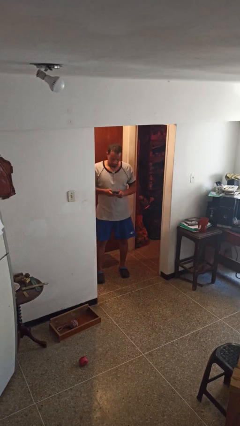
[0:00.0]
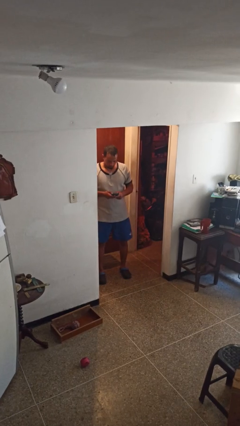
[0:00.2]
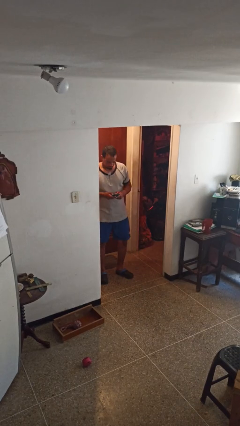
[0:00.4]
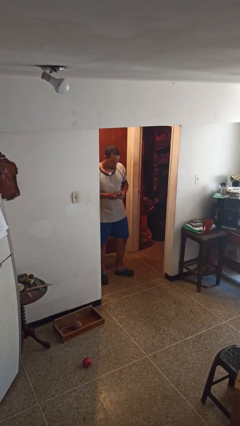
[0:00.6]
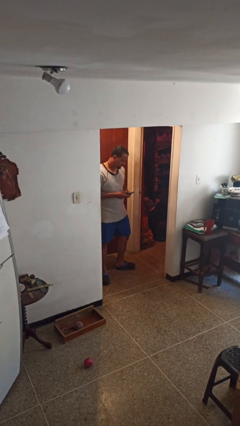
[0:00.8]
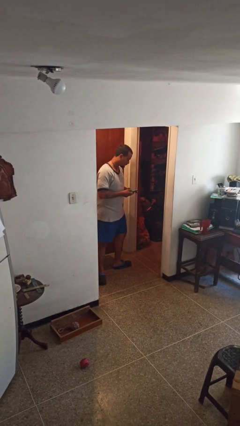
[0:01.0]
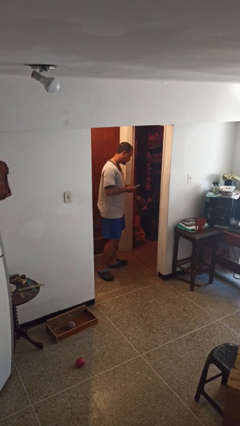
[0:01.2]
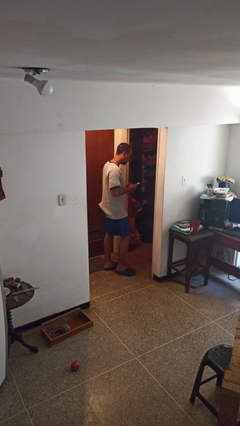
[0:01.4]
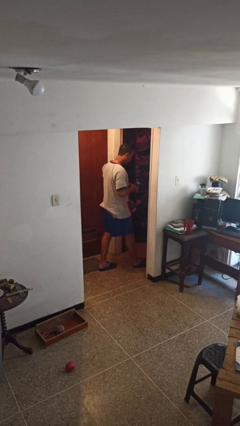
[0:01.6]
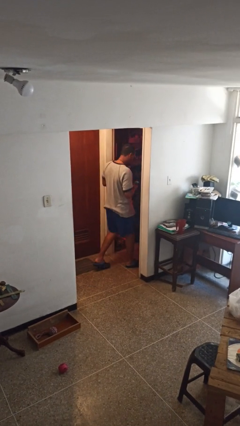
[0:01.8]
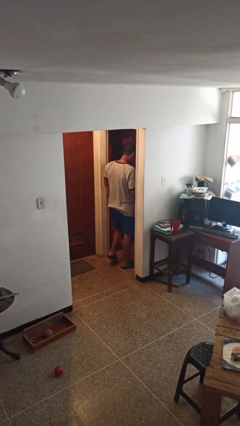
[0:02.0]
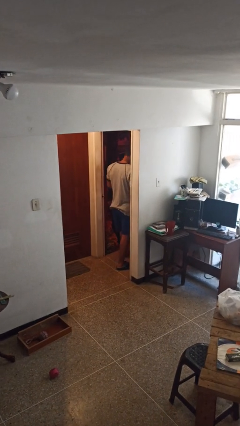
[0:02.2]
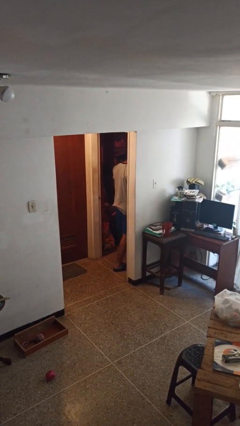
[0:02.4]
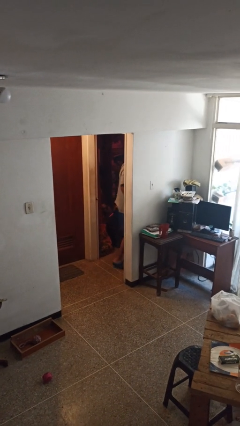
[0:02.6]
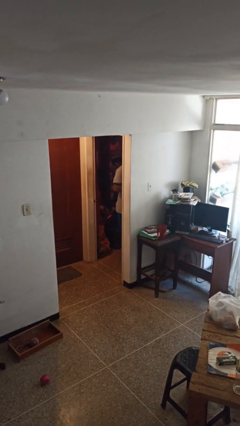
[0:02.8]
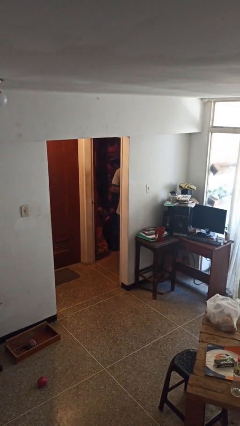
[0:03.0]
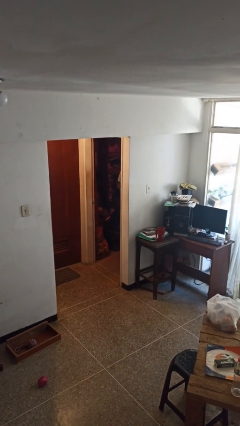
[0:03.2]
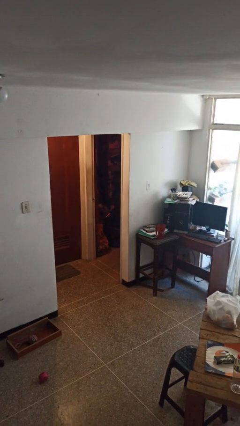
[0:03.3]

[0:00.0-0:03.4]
person exits scene through structure

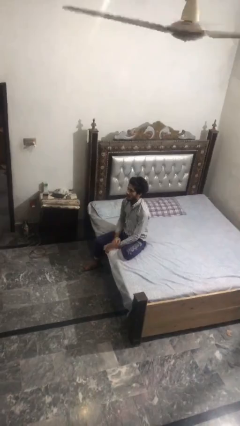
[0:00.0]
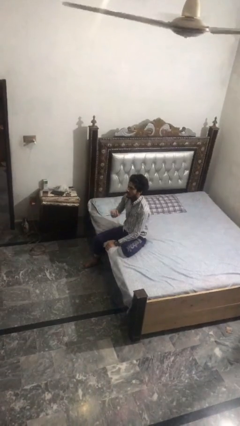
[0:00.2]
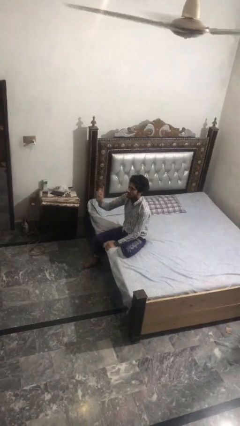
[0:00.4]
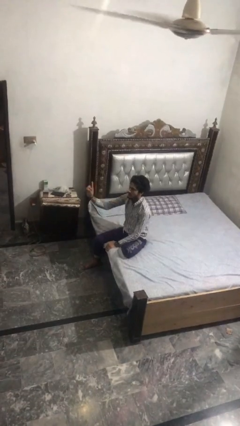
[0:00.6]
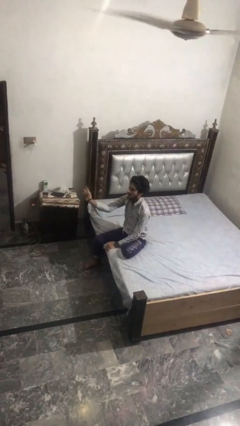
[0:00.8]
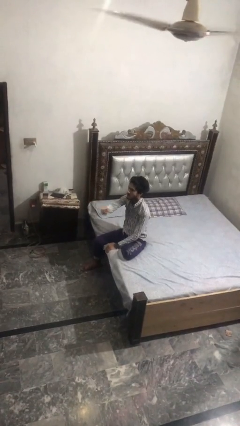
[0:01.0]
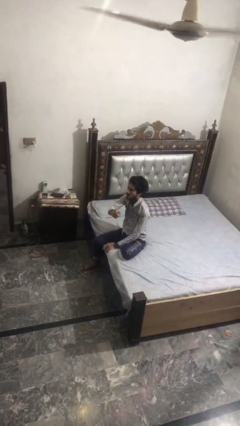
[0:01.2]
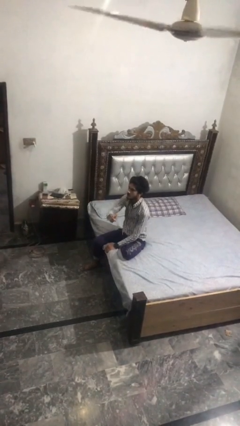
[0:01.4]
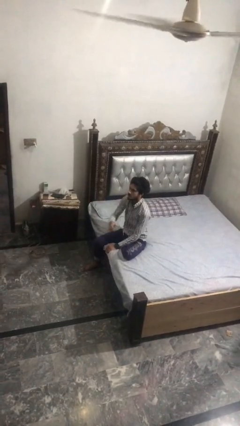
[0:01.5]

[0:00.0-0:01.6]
person gestures swipe left

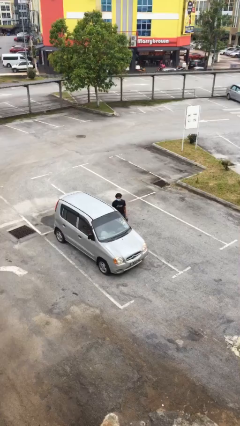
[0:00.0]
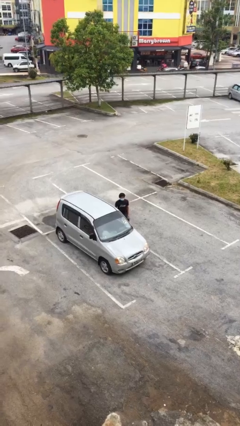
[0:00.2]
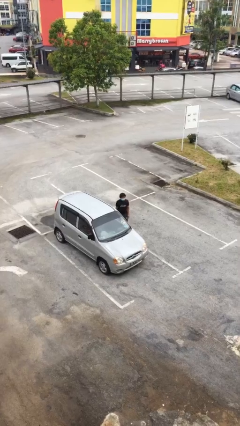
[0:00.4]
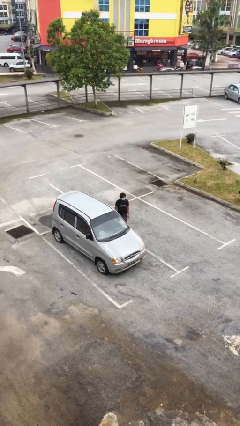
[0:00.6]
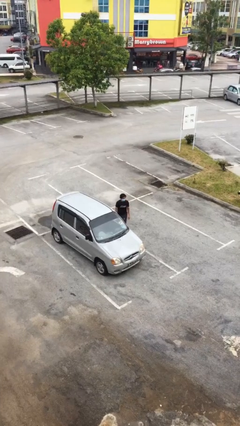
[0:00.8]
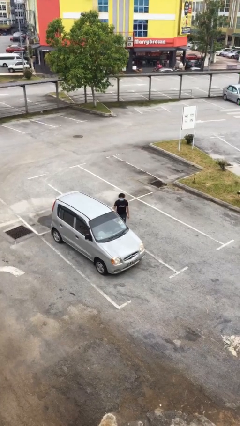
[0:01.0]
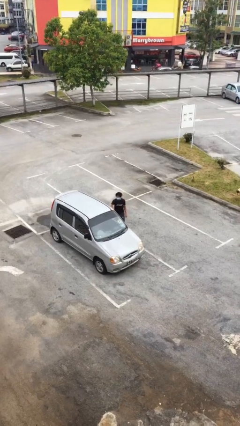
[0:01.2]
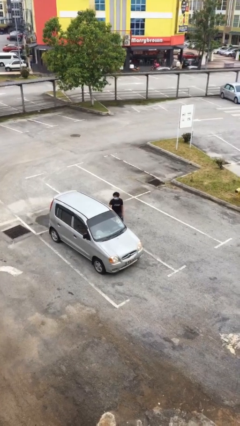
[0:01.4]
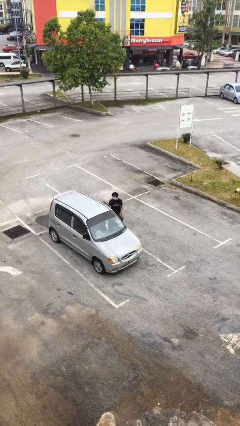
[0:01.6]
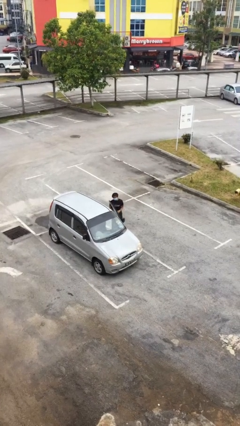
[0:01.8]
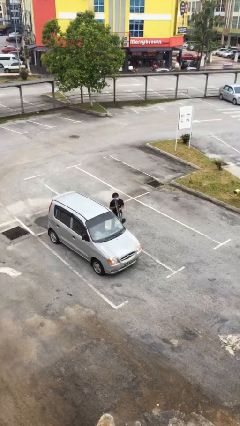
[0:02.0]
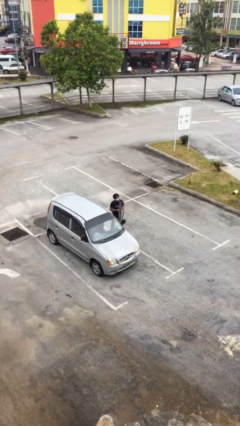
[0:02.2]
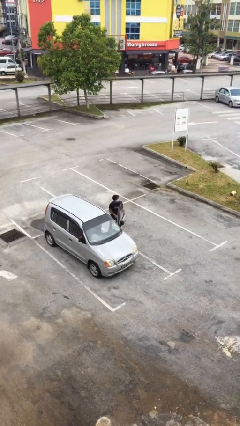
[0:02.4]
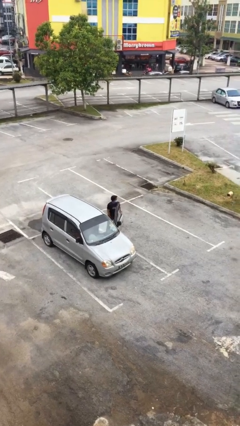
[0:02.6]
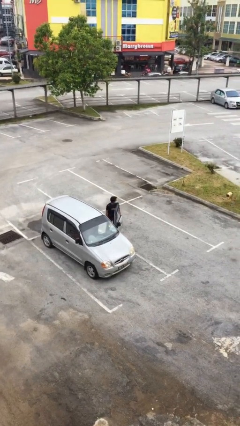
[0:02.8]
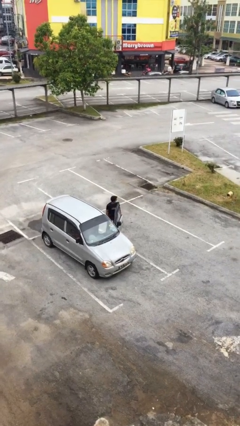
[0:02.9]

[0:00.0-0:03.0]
person opens car door

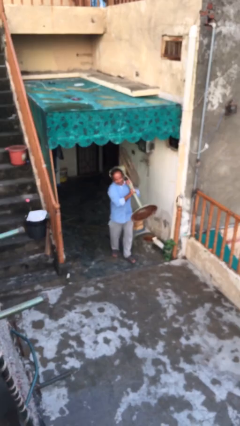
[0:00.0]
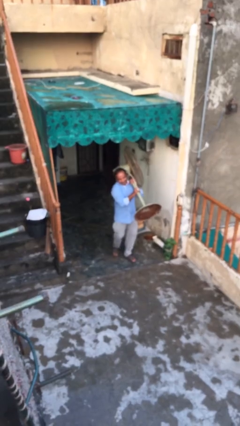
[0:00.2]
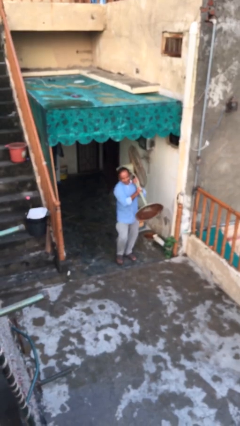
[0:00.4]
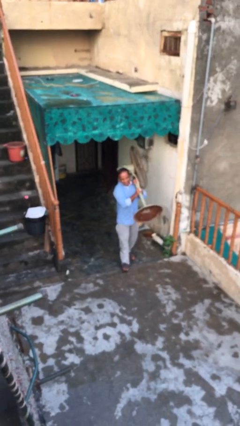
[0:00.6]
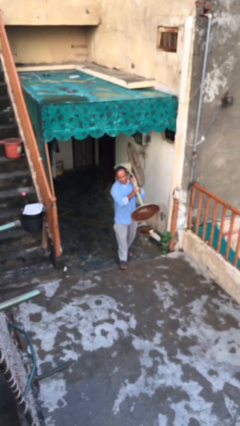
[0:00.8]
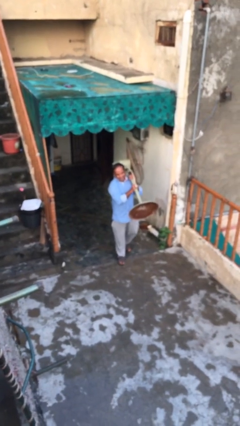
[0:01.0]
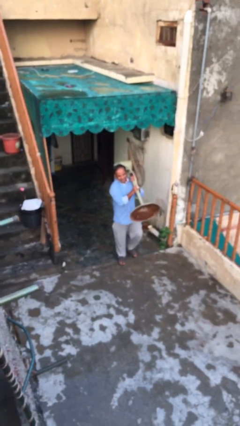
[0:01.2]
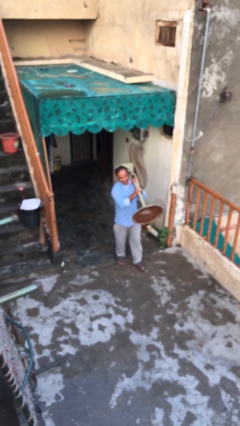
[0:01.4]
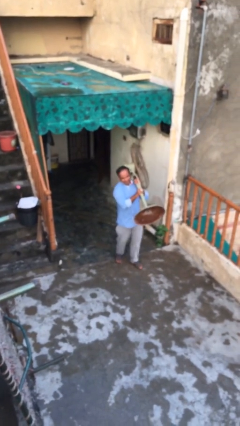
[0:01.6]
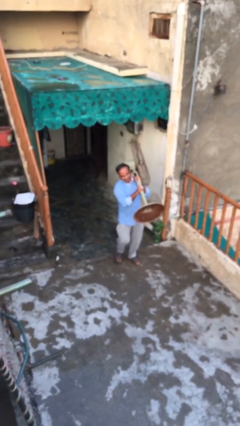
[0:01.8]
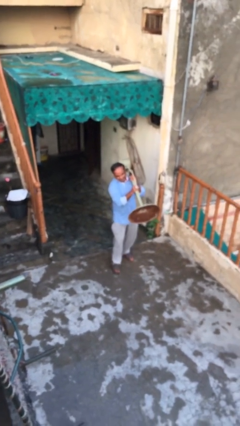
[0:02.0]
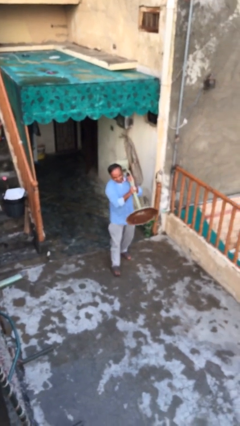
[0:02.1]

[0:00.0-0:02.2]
person carries heavy object

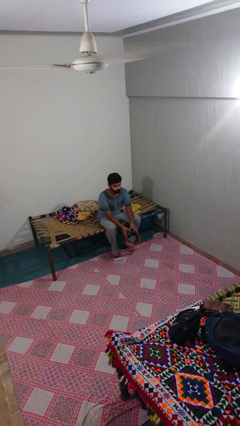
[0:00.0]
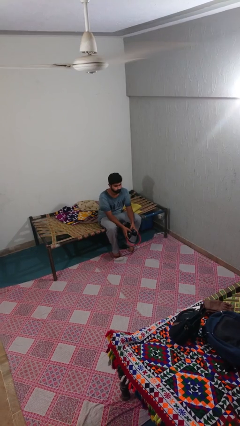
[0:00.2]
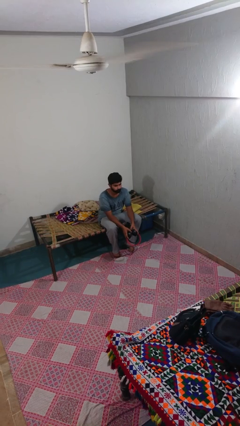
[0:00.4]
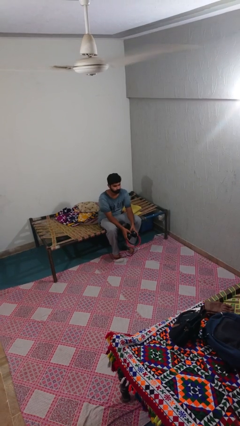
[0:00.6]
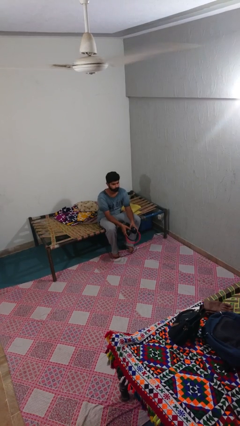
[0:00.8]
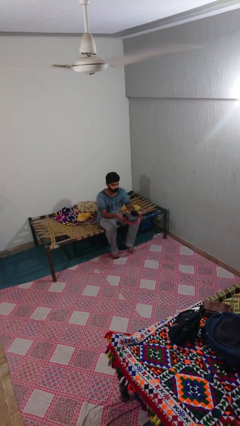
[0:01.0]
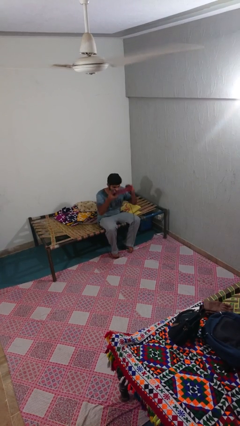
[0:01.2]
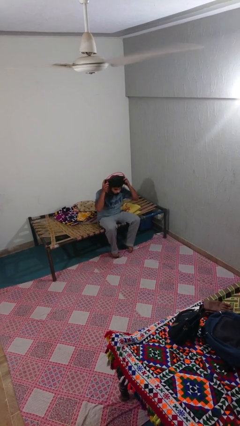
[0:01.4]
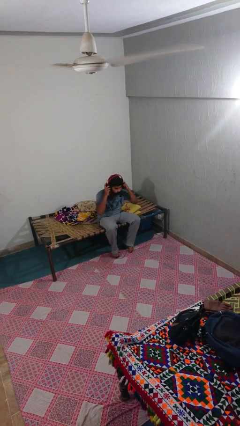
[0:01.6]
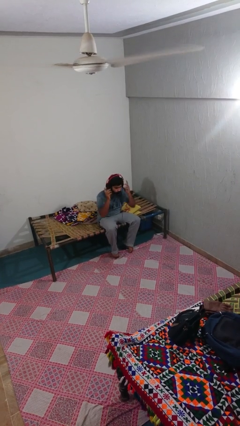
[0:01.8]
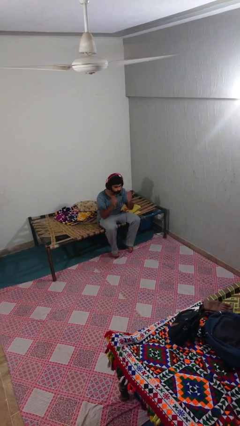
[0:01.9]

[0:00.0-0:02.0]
person puts on headphones

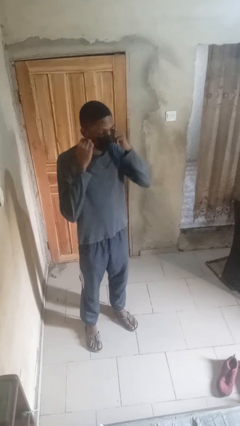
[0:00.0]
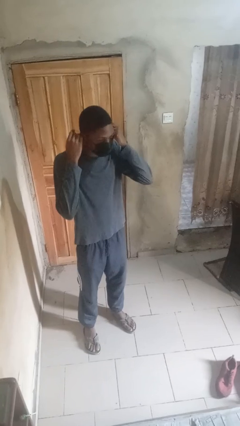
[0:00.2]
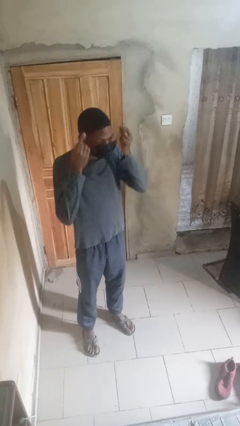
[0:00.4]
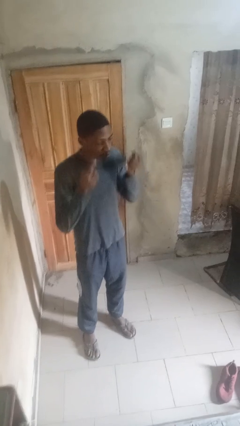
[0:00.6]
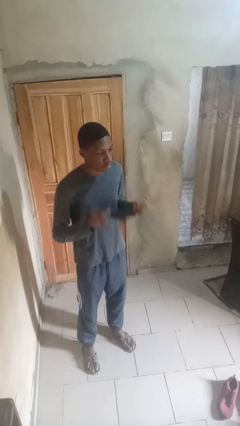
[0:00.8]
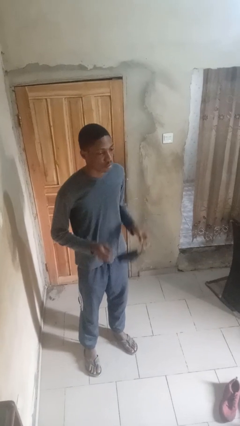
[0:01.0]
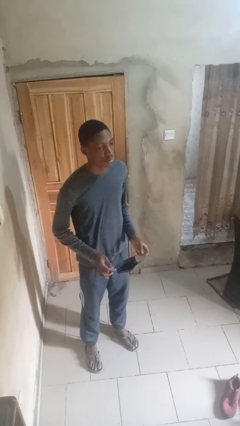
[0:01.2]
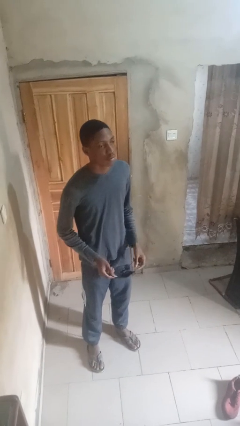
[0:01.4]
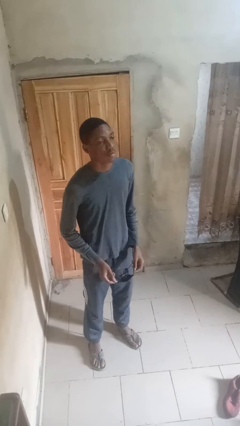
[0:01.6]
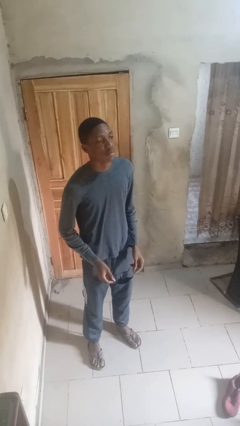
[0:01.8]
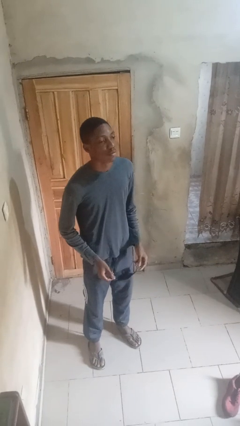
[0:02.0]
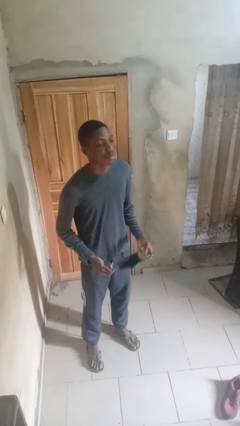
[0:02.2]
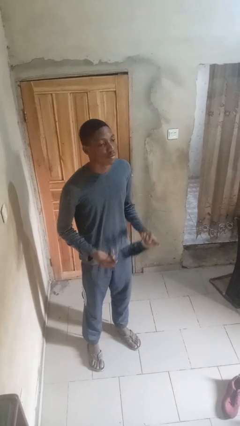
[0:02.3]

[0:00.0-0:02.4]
person takes off facemask

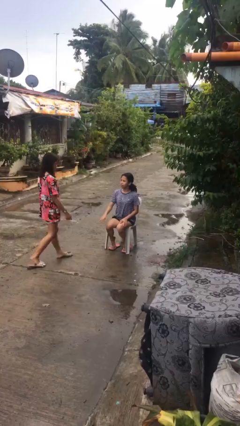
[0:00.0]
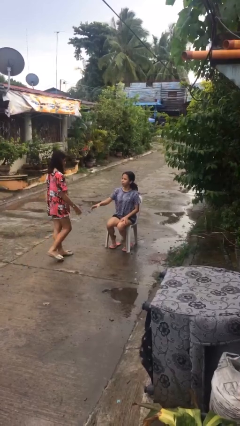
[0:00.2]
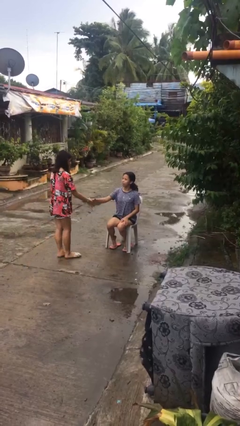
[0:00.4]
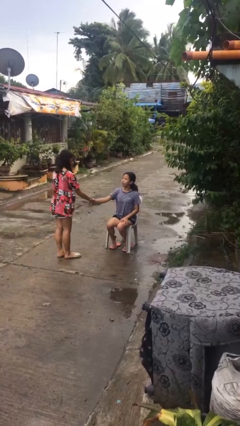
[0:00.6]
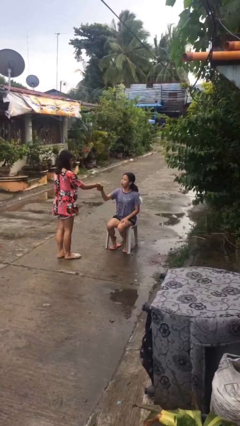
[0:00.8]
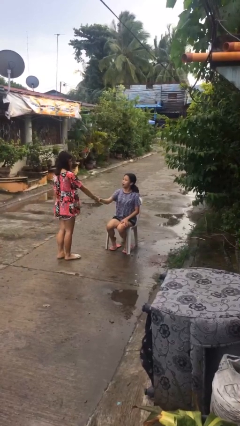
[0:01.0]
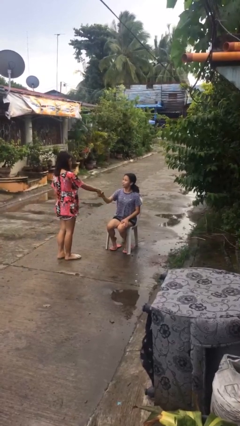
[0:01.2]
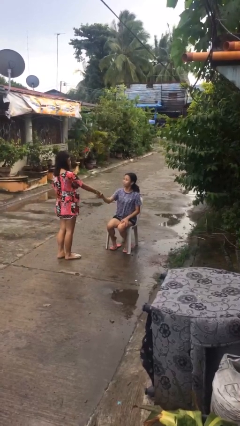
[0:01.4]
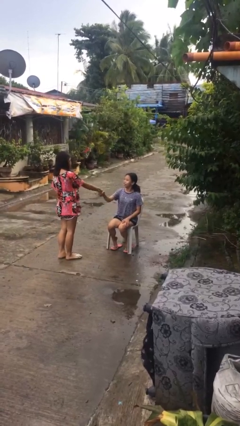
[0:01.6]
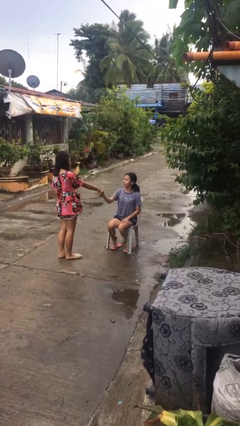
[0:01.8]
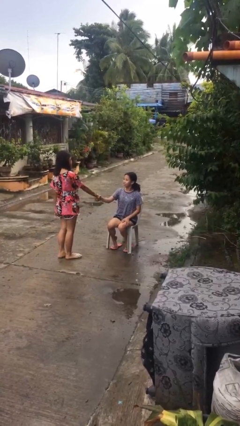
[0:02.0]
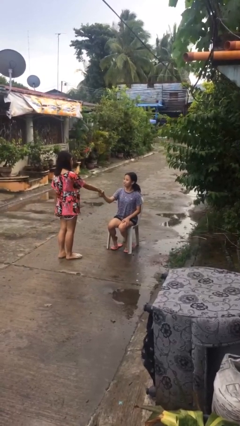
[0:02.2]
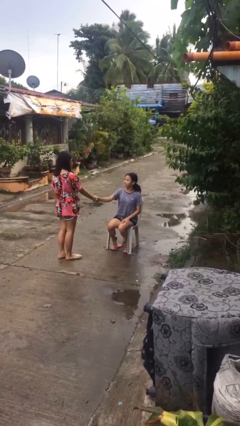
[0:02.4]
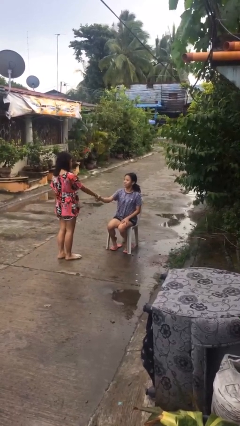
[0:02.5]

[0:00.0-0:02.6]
person shakes hand
